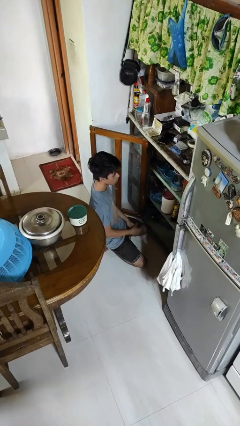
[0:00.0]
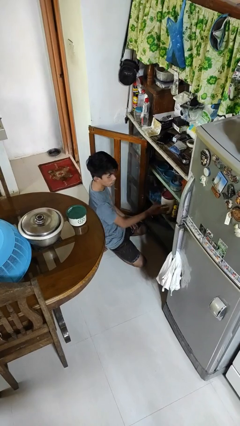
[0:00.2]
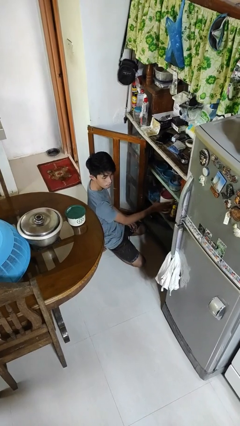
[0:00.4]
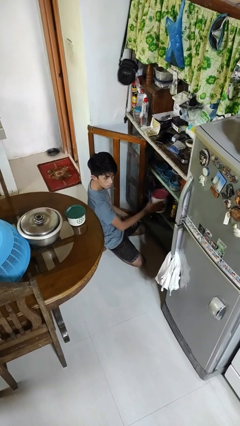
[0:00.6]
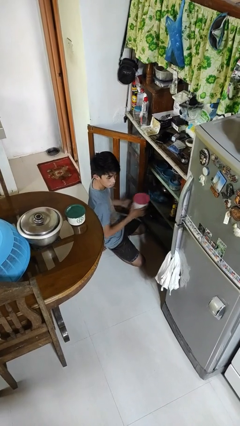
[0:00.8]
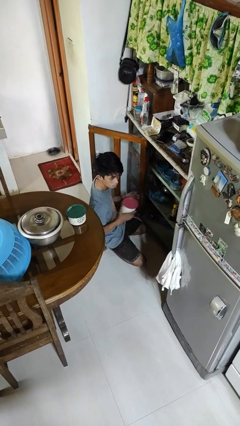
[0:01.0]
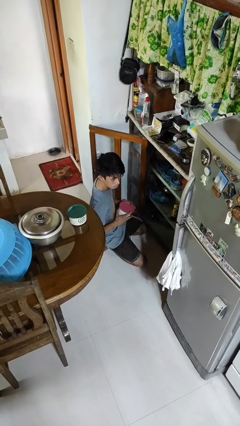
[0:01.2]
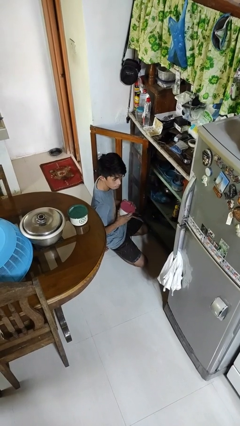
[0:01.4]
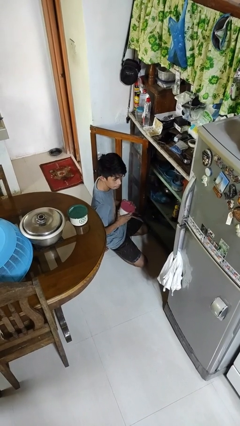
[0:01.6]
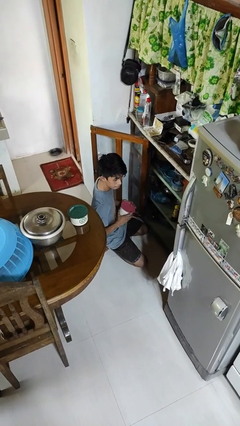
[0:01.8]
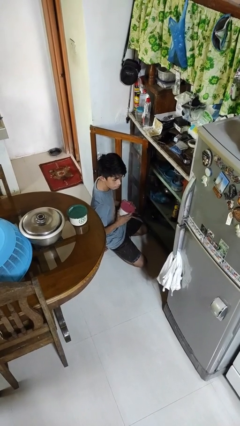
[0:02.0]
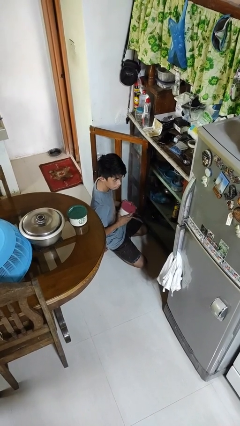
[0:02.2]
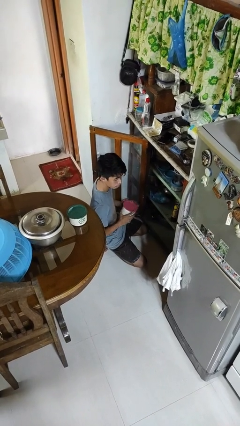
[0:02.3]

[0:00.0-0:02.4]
person picks up object from cabinet

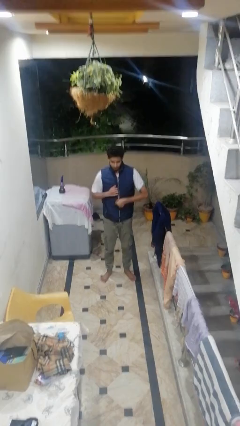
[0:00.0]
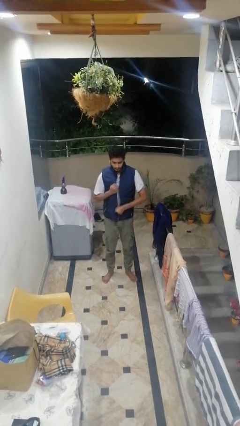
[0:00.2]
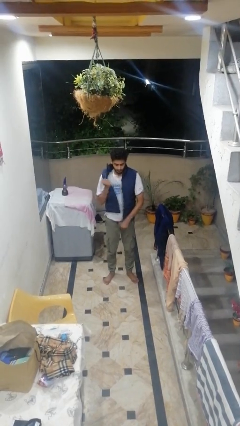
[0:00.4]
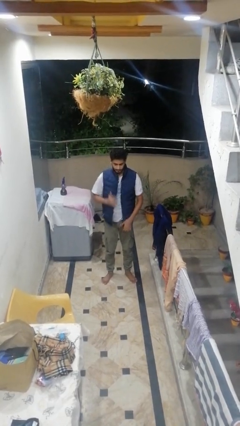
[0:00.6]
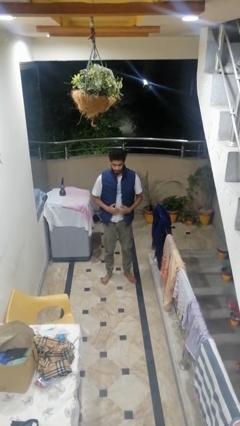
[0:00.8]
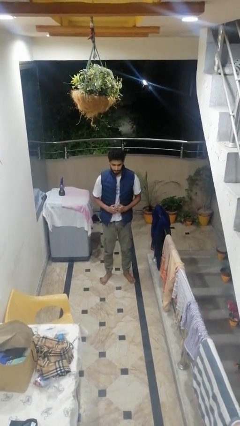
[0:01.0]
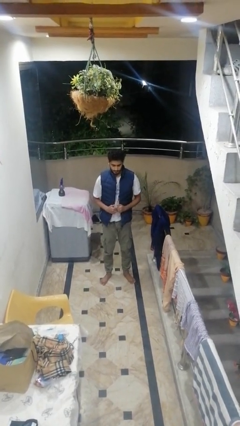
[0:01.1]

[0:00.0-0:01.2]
person unzips jacket

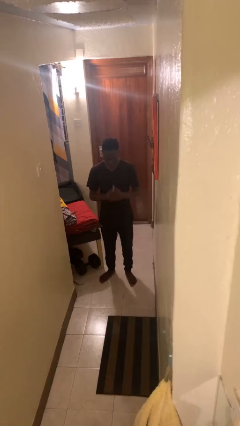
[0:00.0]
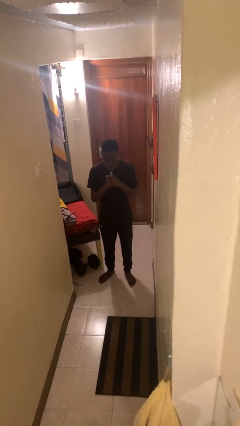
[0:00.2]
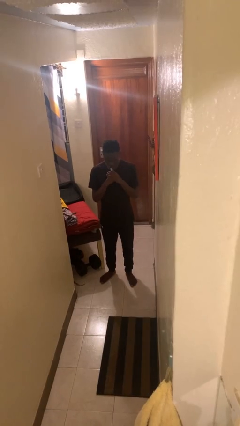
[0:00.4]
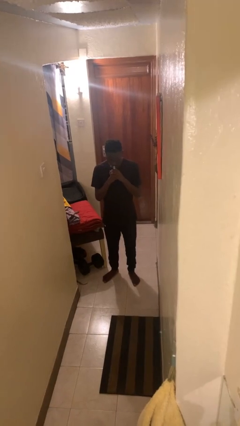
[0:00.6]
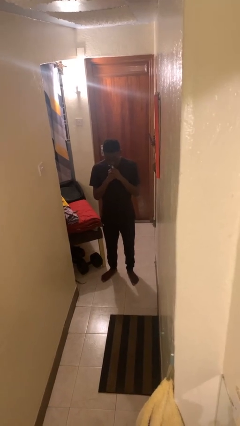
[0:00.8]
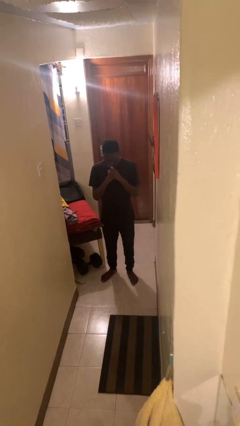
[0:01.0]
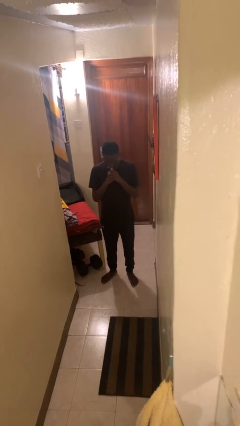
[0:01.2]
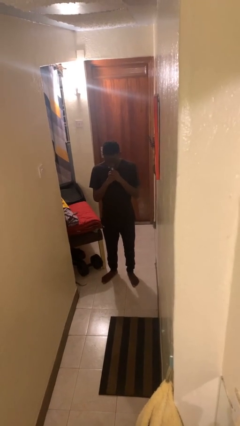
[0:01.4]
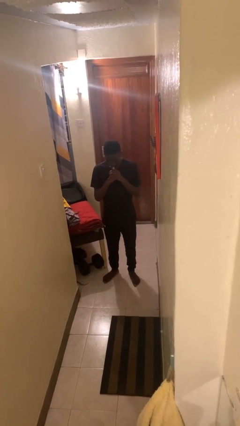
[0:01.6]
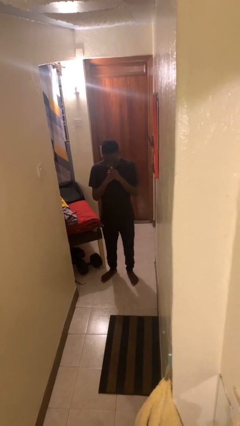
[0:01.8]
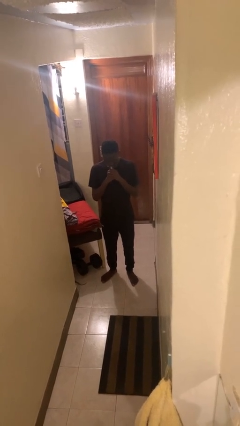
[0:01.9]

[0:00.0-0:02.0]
person vapes

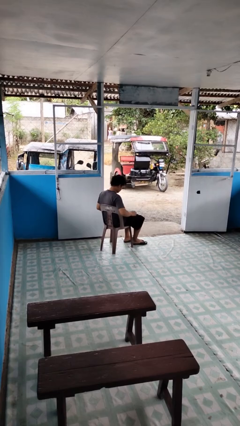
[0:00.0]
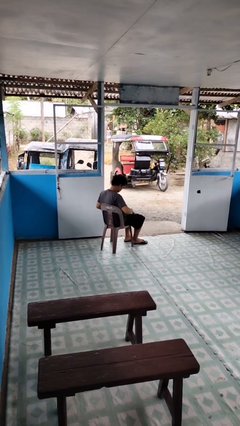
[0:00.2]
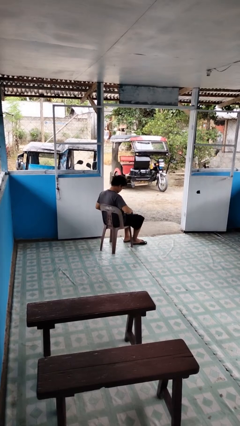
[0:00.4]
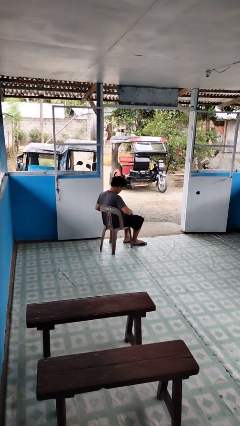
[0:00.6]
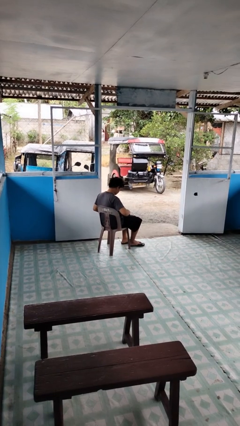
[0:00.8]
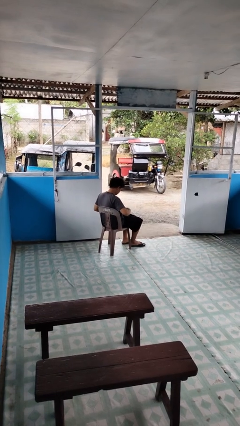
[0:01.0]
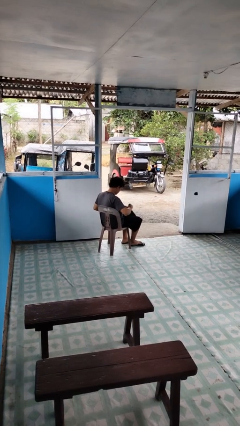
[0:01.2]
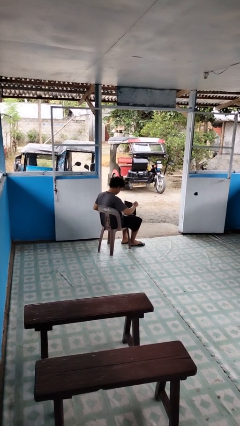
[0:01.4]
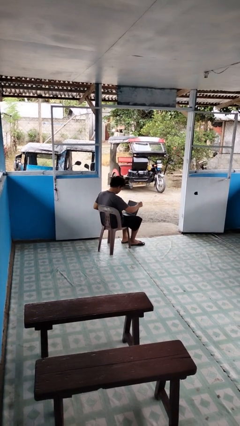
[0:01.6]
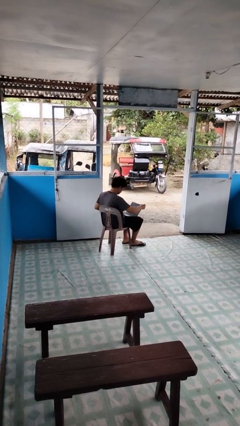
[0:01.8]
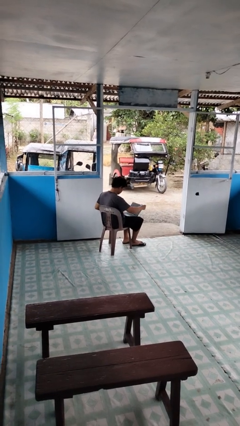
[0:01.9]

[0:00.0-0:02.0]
person opens laptop

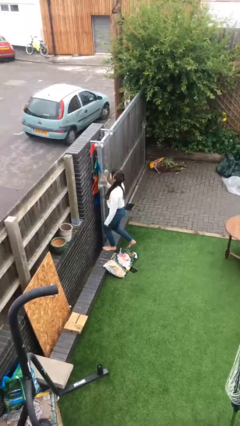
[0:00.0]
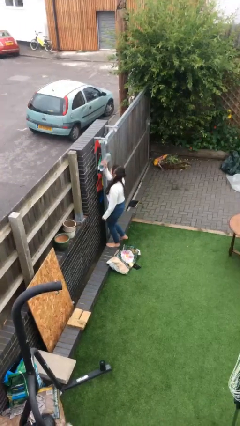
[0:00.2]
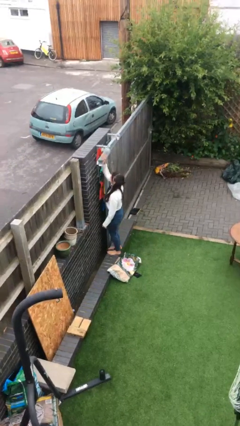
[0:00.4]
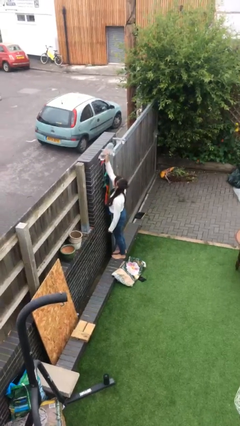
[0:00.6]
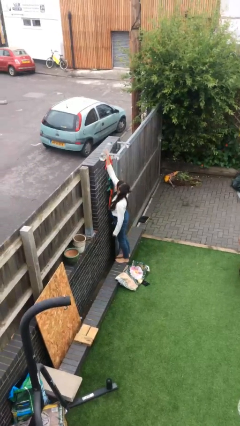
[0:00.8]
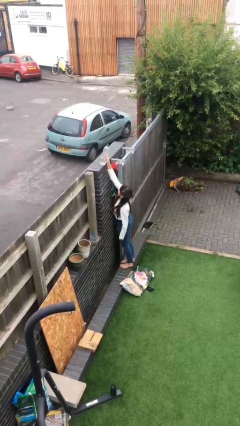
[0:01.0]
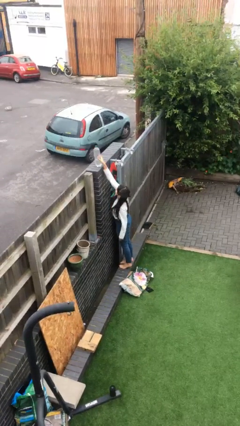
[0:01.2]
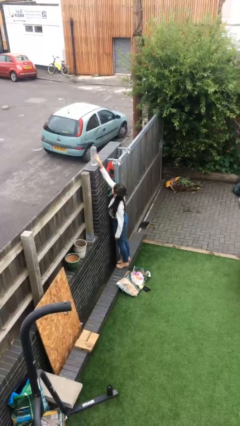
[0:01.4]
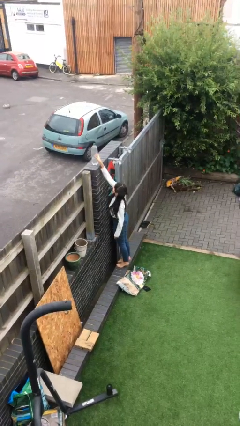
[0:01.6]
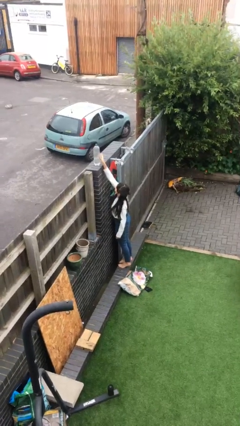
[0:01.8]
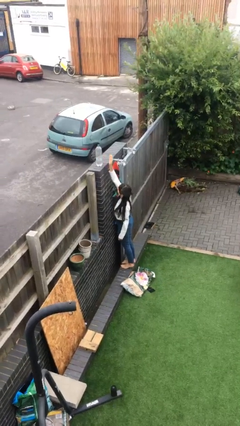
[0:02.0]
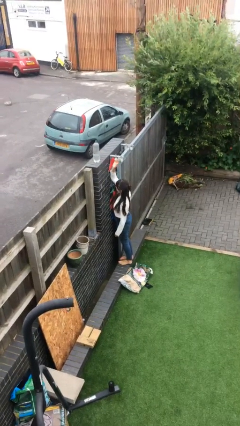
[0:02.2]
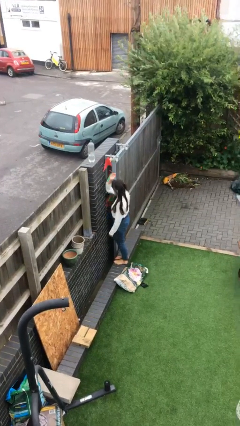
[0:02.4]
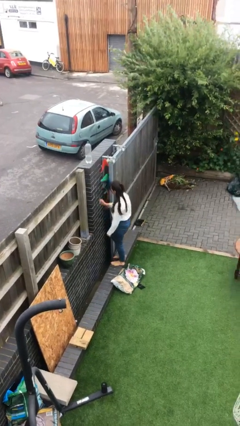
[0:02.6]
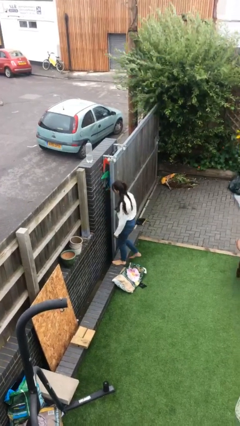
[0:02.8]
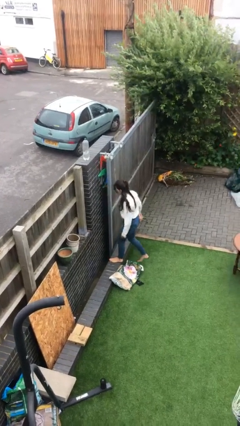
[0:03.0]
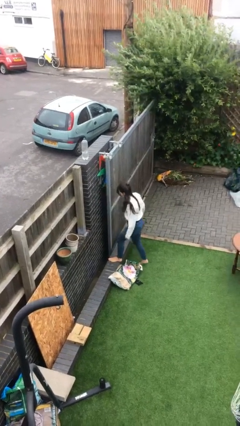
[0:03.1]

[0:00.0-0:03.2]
person puts down object on shelf

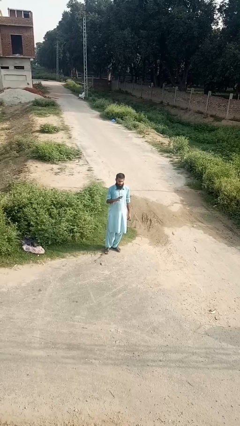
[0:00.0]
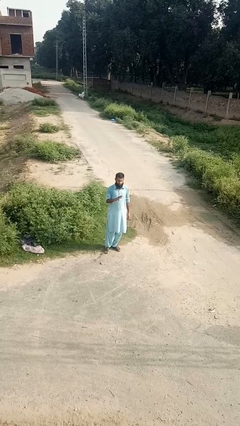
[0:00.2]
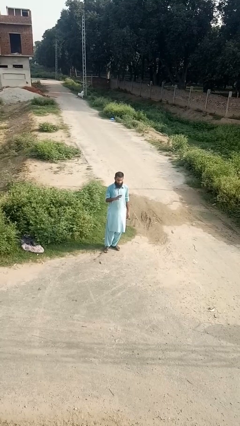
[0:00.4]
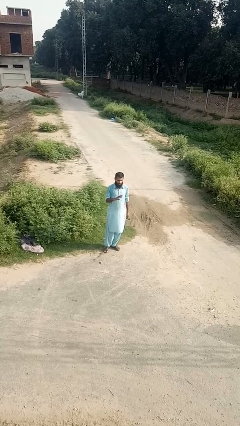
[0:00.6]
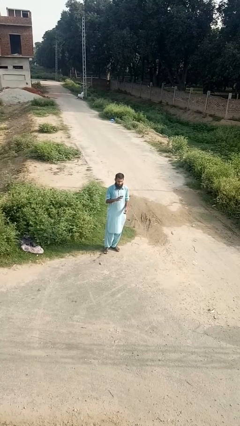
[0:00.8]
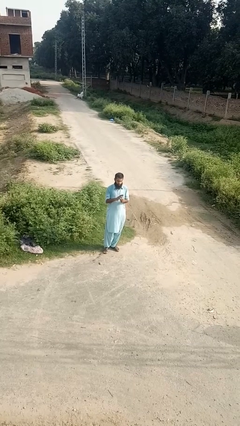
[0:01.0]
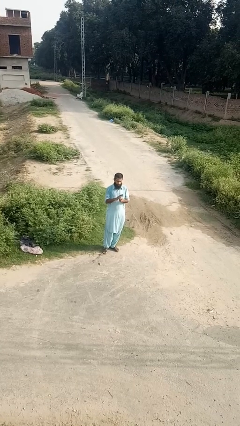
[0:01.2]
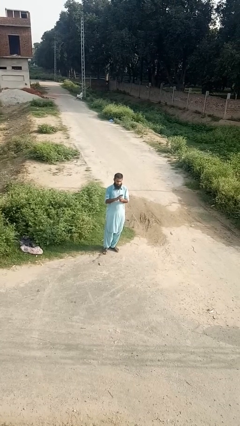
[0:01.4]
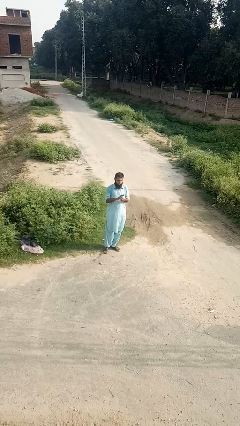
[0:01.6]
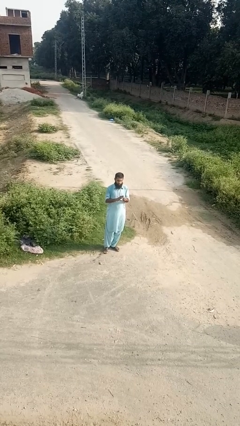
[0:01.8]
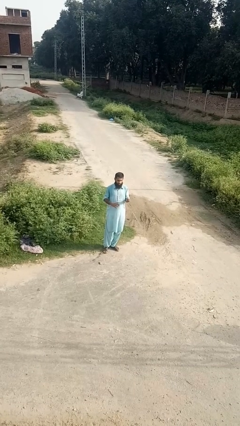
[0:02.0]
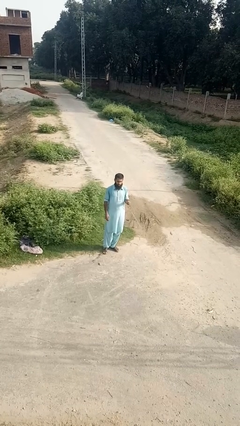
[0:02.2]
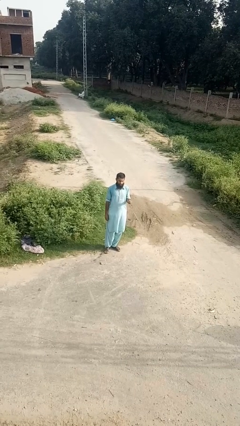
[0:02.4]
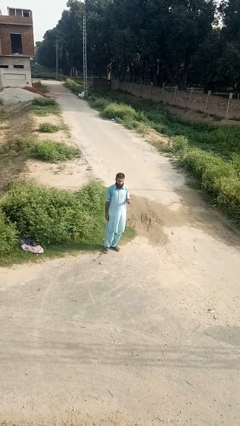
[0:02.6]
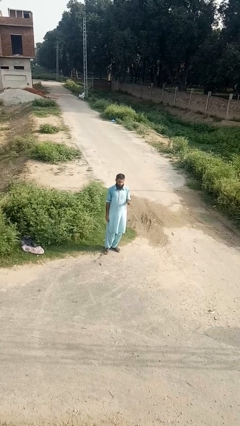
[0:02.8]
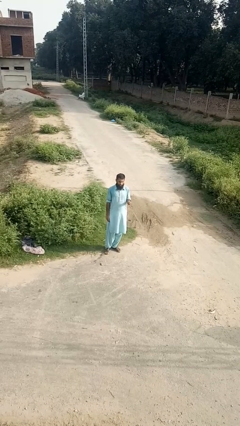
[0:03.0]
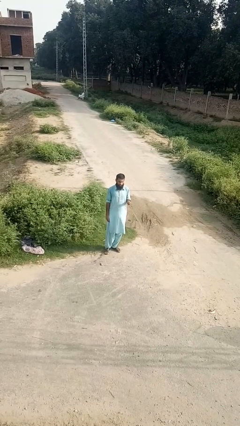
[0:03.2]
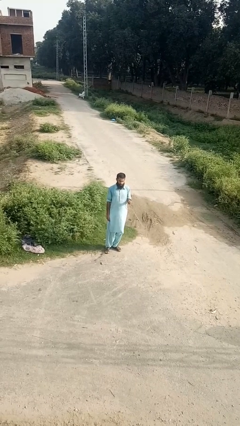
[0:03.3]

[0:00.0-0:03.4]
person takes off ring

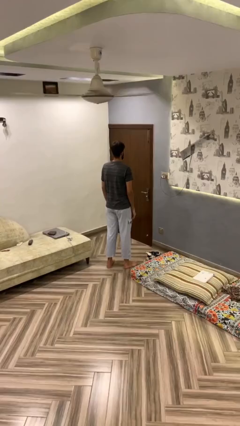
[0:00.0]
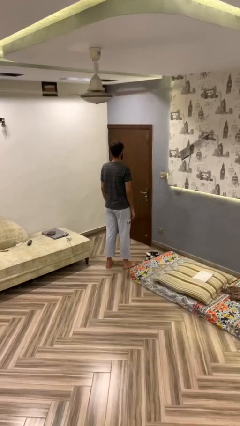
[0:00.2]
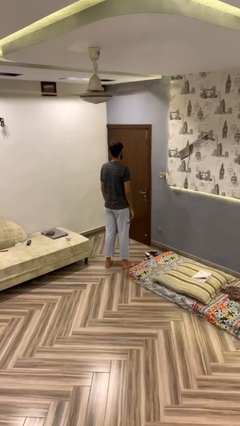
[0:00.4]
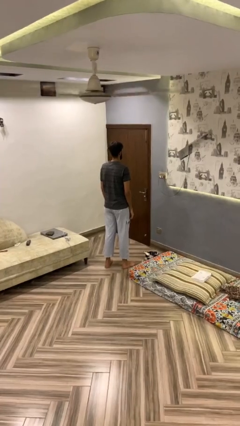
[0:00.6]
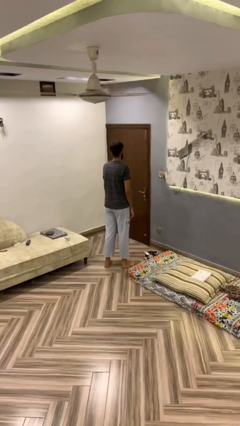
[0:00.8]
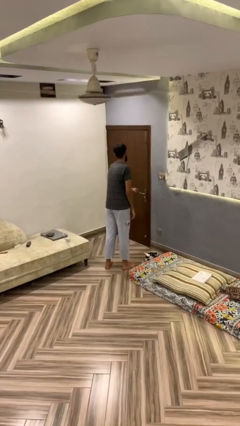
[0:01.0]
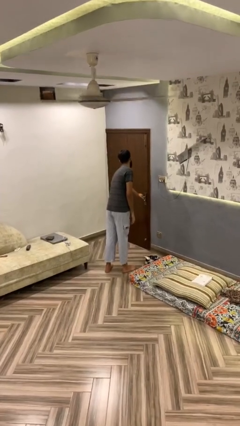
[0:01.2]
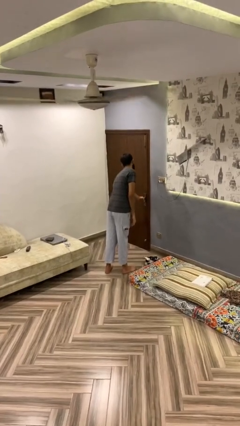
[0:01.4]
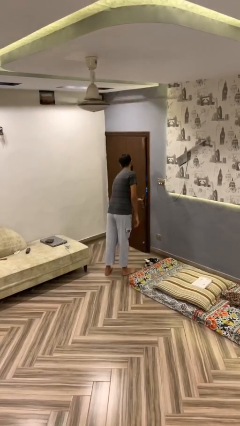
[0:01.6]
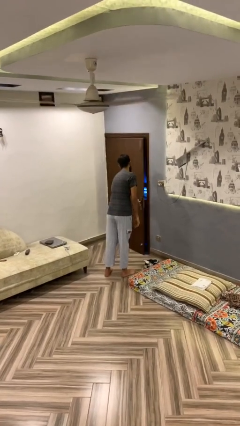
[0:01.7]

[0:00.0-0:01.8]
person opens facility door

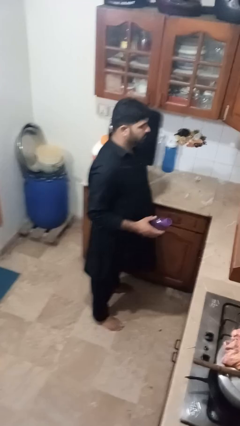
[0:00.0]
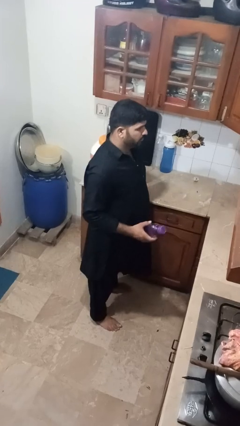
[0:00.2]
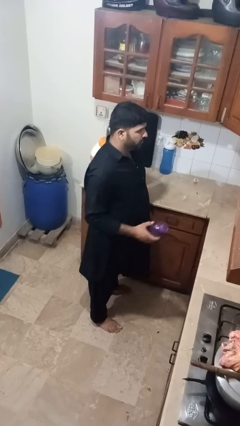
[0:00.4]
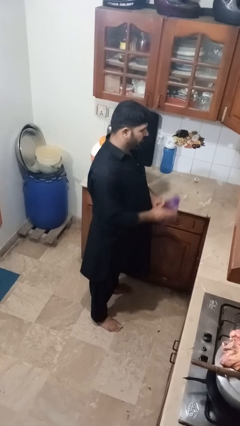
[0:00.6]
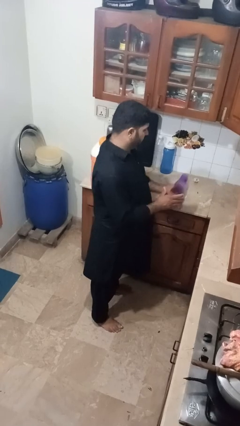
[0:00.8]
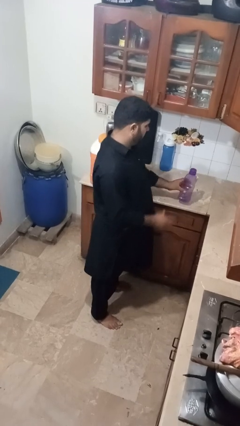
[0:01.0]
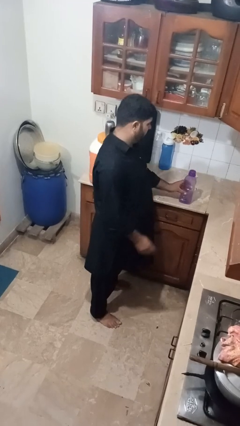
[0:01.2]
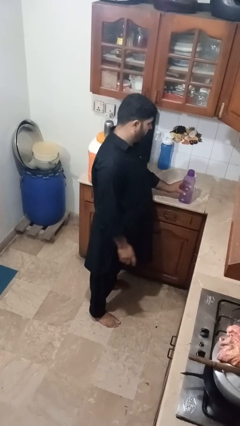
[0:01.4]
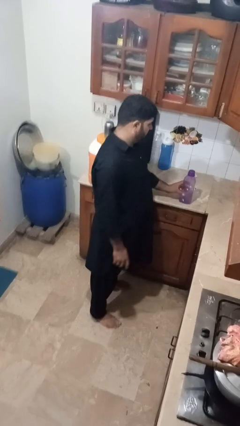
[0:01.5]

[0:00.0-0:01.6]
person puts down object on countertop
